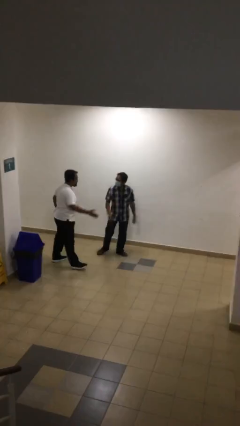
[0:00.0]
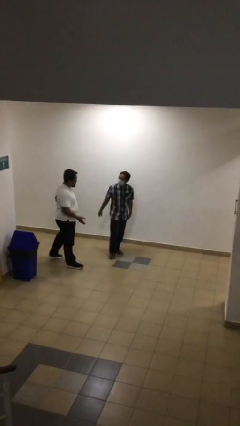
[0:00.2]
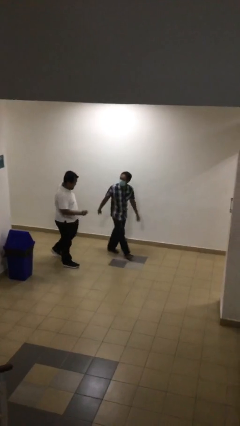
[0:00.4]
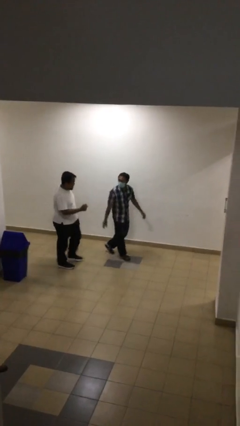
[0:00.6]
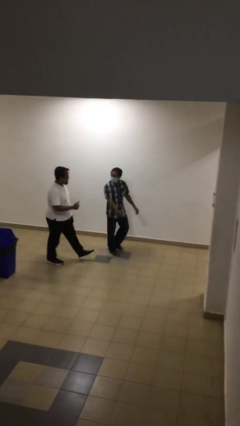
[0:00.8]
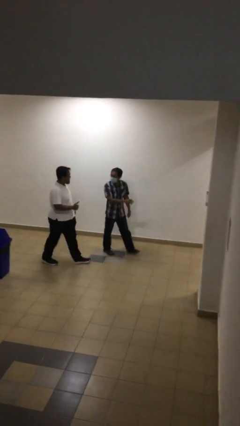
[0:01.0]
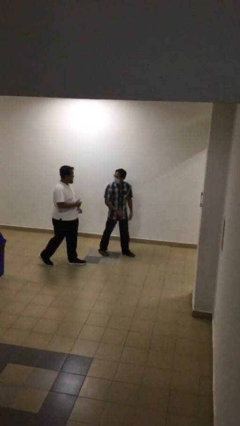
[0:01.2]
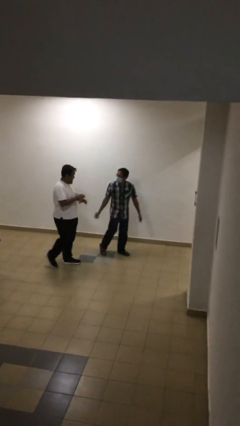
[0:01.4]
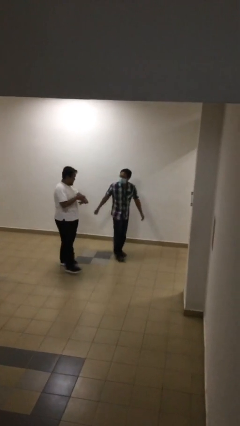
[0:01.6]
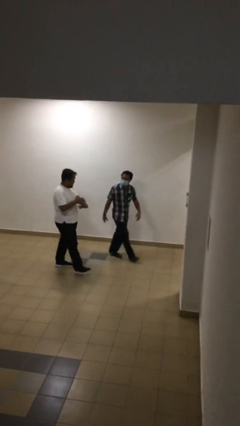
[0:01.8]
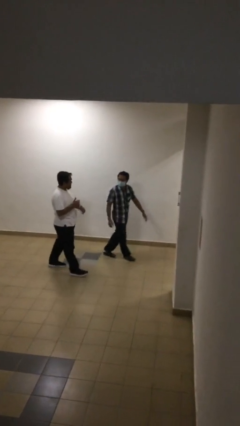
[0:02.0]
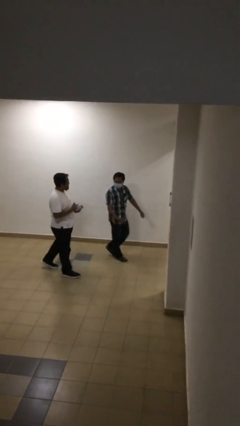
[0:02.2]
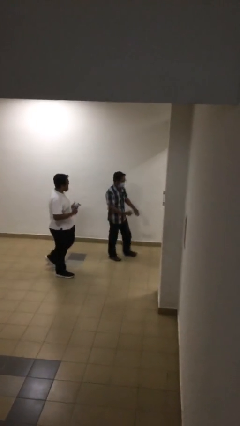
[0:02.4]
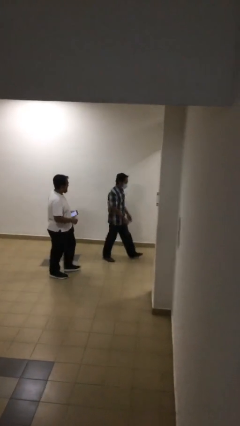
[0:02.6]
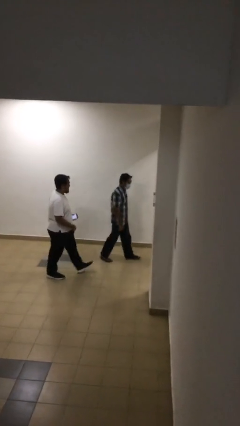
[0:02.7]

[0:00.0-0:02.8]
person talks to person

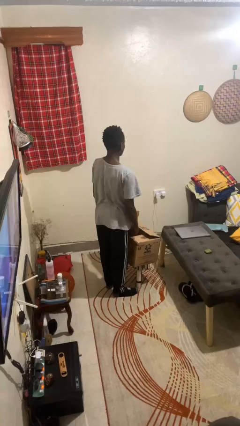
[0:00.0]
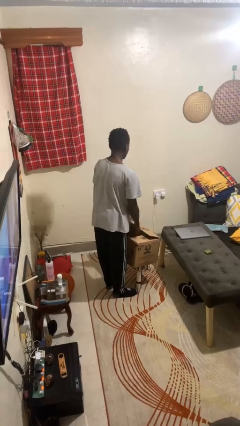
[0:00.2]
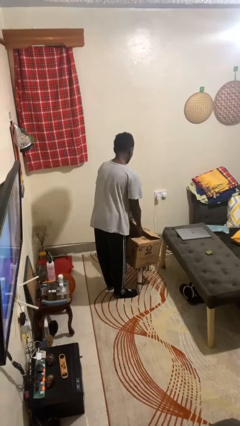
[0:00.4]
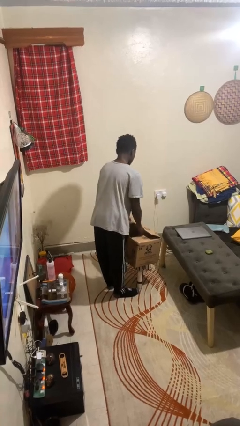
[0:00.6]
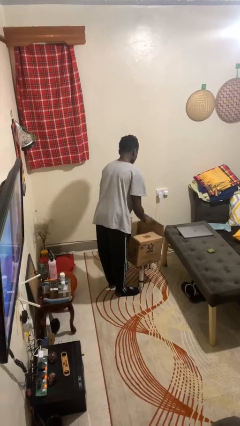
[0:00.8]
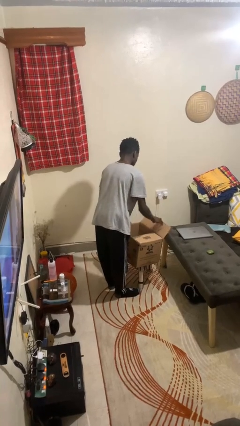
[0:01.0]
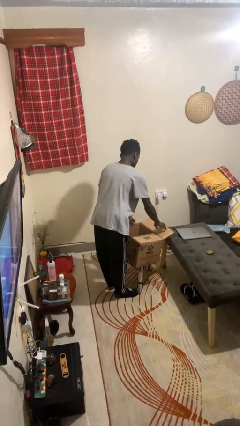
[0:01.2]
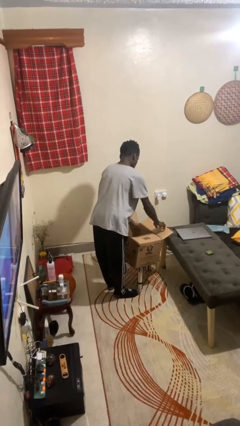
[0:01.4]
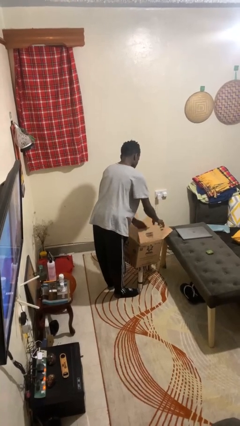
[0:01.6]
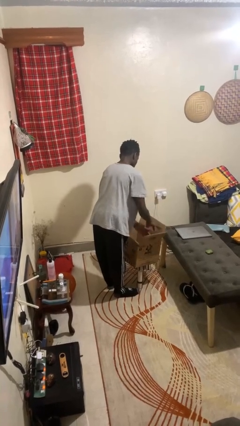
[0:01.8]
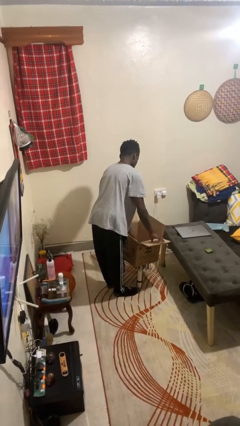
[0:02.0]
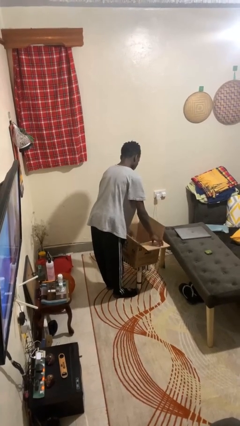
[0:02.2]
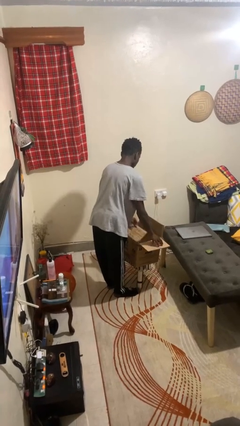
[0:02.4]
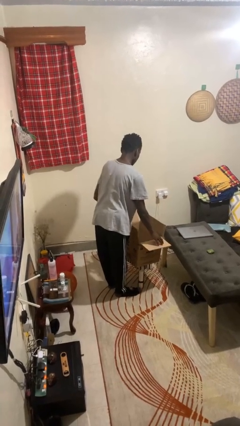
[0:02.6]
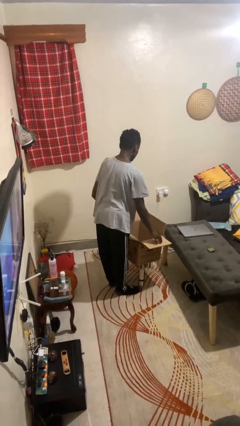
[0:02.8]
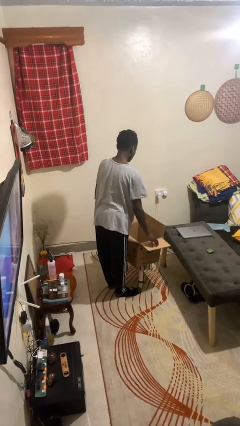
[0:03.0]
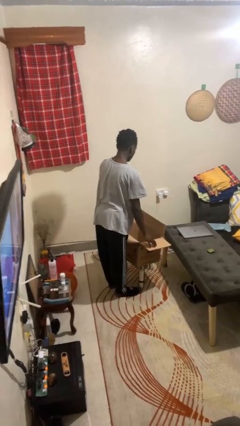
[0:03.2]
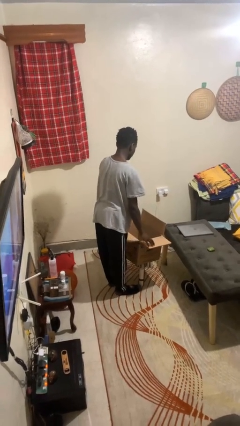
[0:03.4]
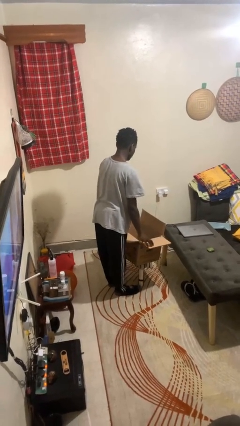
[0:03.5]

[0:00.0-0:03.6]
person opens box

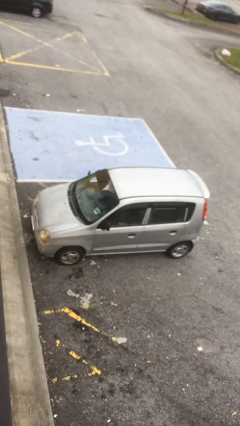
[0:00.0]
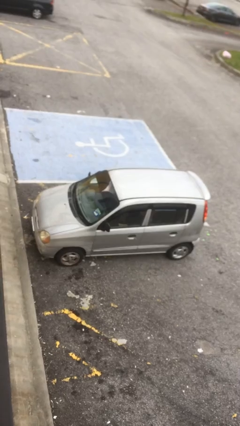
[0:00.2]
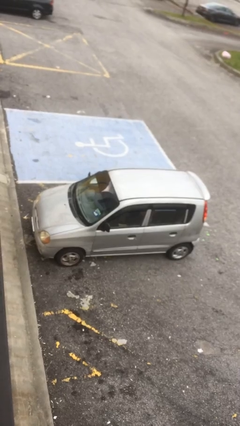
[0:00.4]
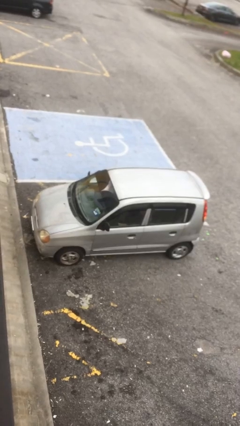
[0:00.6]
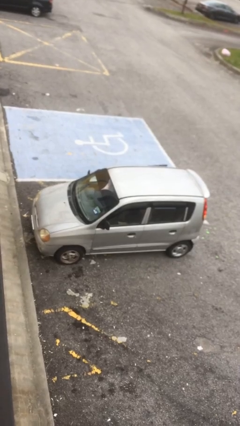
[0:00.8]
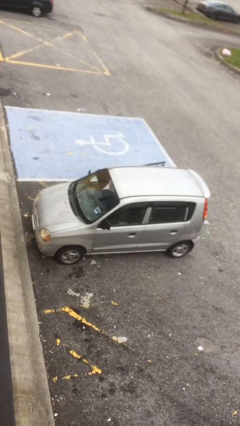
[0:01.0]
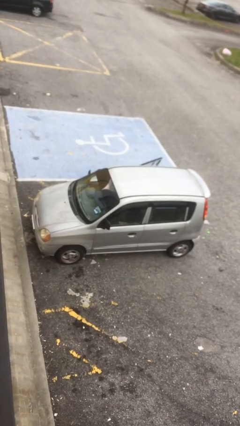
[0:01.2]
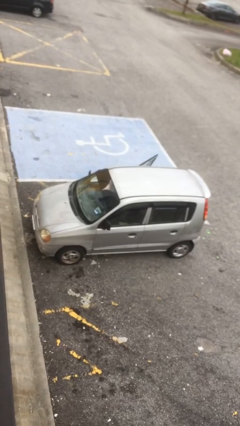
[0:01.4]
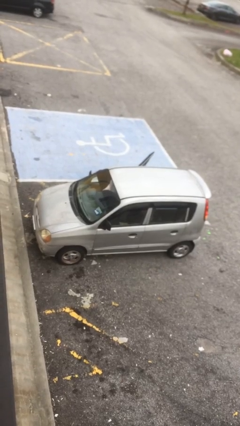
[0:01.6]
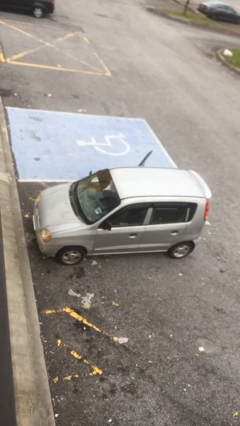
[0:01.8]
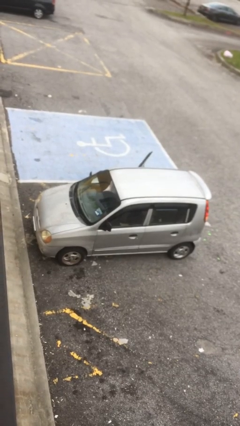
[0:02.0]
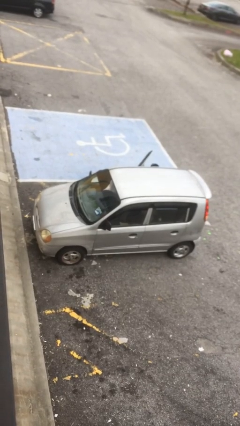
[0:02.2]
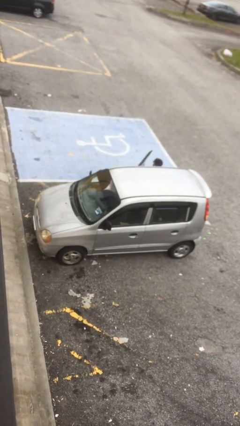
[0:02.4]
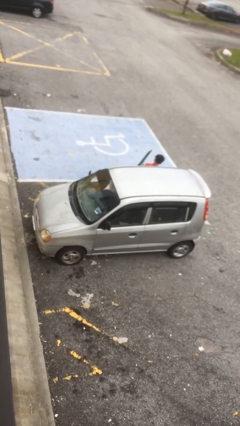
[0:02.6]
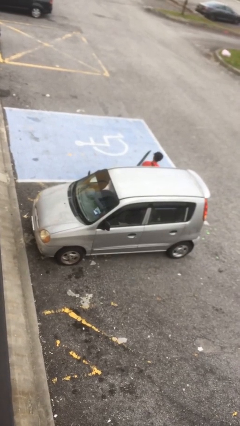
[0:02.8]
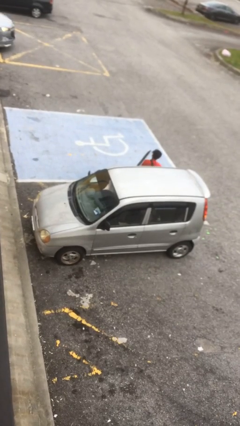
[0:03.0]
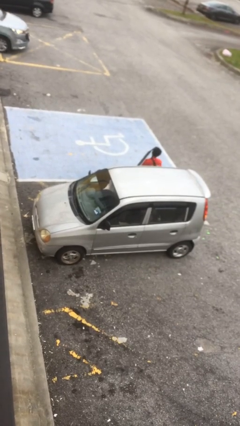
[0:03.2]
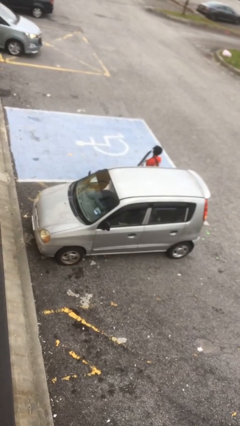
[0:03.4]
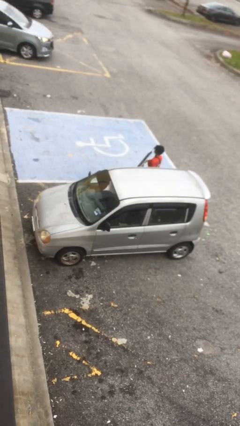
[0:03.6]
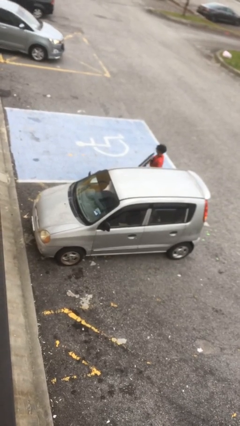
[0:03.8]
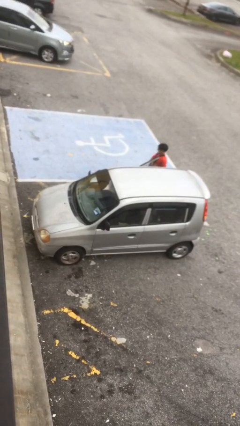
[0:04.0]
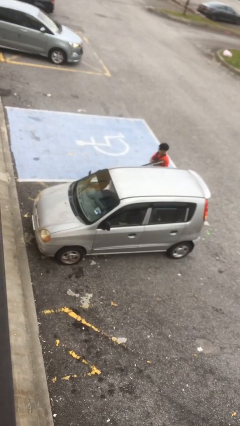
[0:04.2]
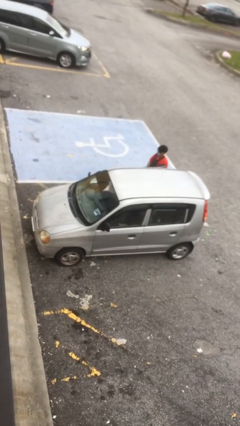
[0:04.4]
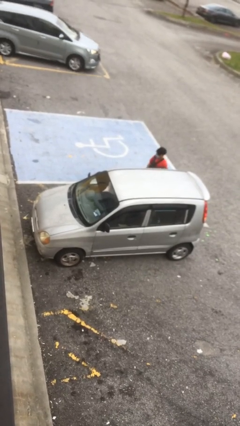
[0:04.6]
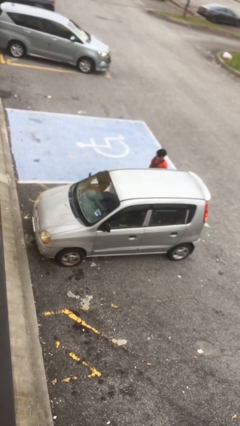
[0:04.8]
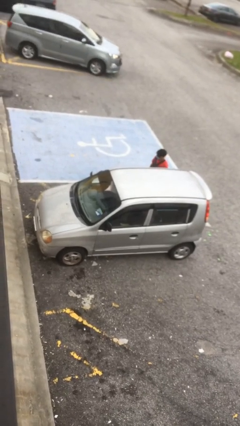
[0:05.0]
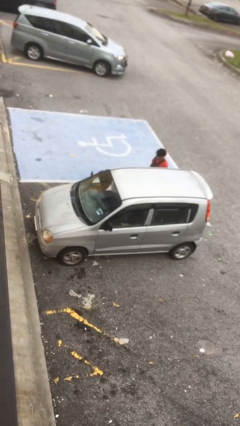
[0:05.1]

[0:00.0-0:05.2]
car drops off person

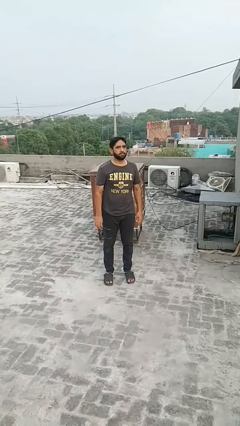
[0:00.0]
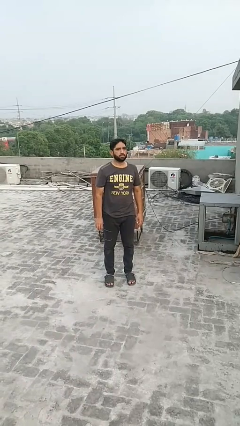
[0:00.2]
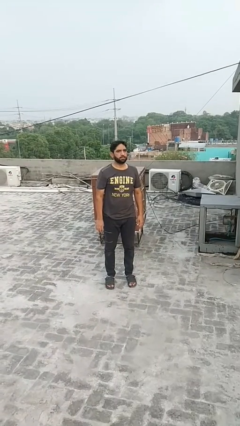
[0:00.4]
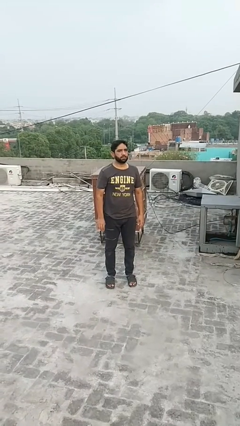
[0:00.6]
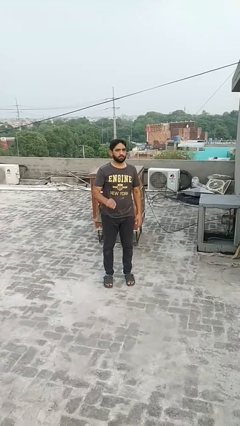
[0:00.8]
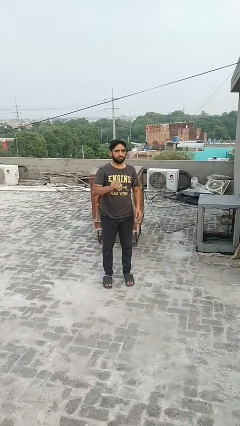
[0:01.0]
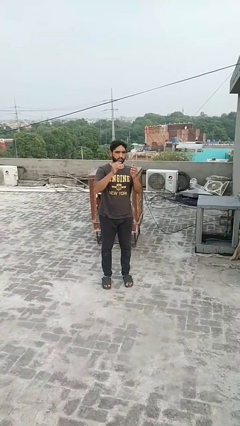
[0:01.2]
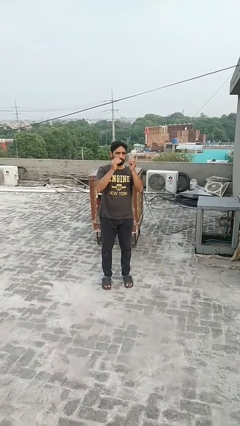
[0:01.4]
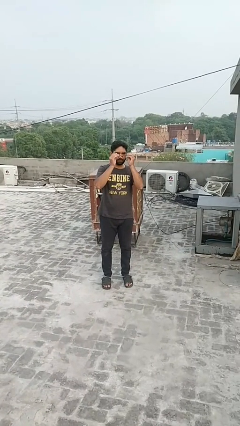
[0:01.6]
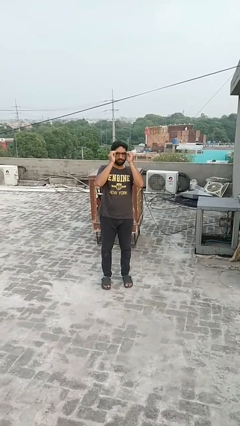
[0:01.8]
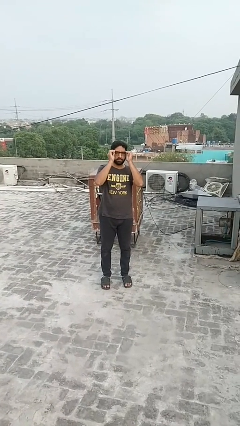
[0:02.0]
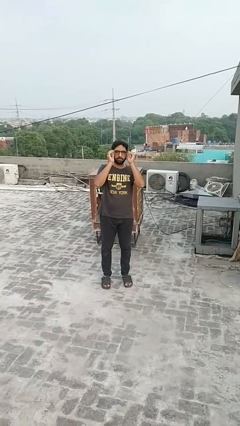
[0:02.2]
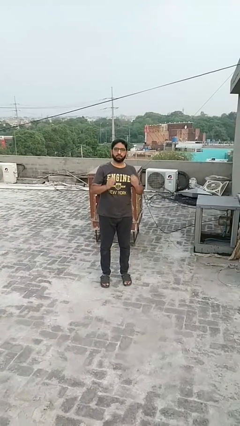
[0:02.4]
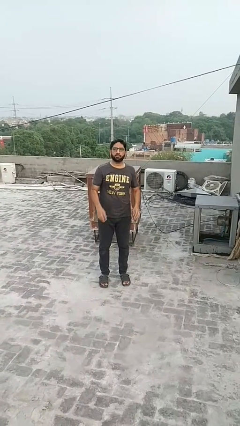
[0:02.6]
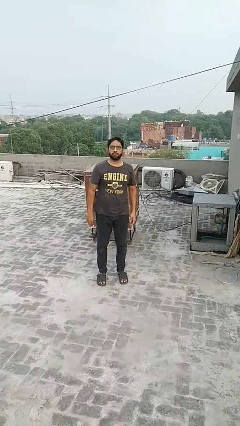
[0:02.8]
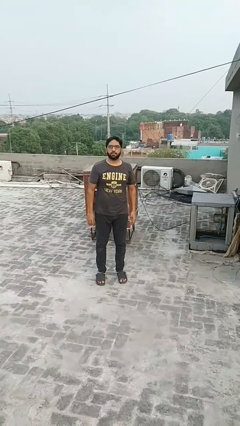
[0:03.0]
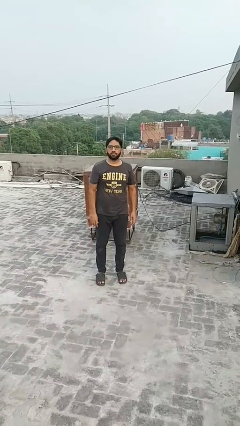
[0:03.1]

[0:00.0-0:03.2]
person puts on glasses

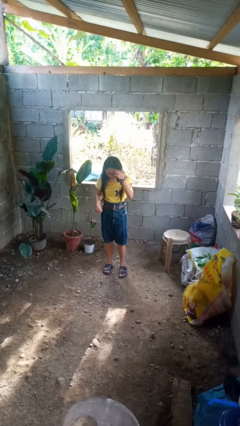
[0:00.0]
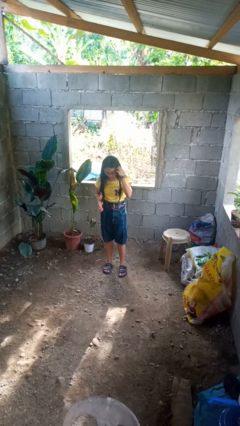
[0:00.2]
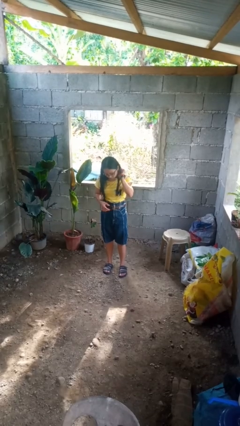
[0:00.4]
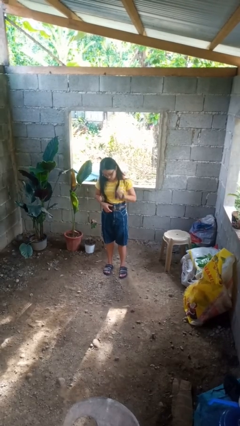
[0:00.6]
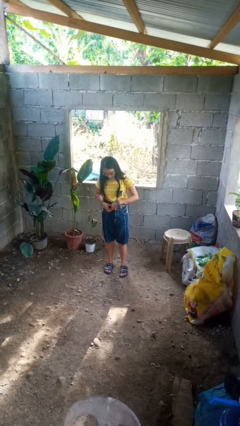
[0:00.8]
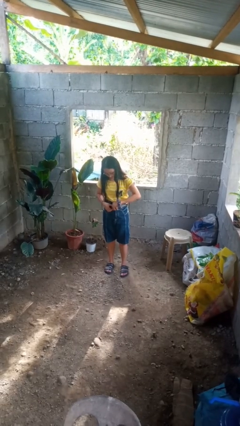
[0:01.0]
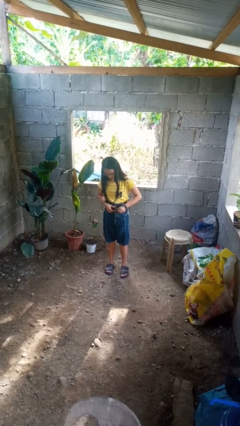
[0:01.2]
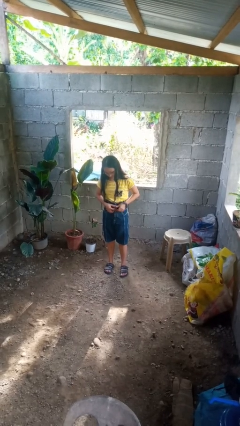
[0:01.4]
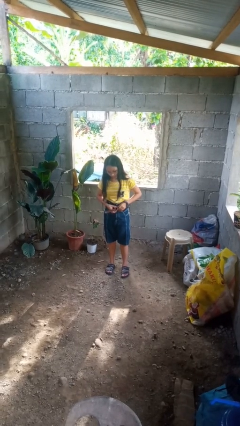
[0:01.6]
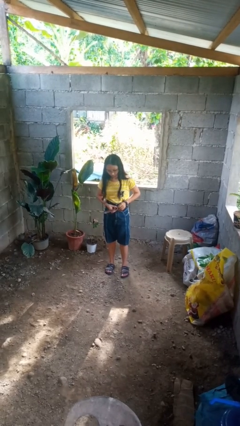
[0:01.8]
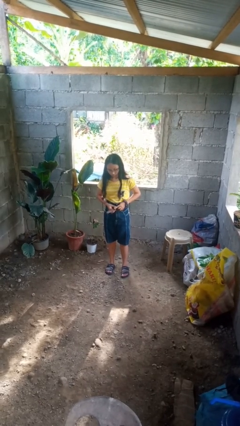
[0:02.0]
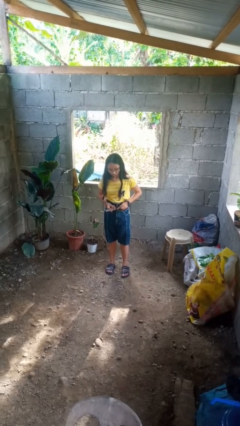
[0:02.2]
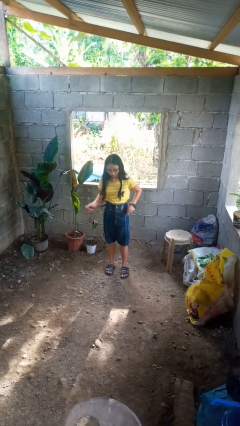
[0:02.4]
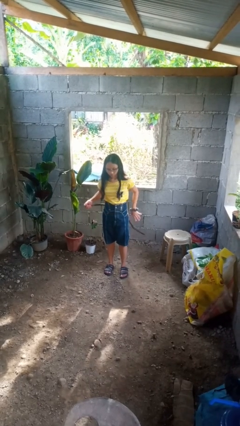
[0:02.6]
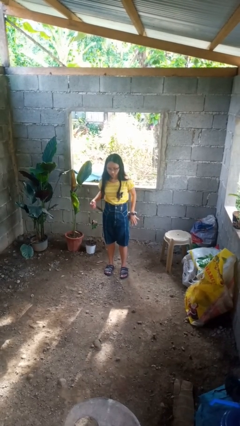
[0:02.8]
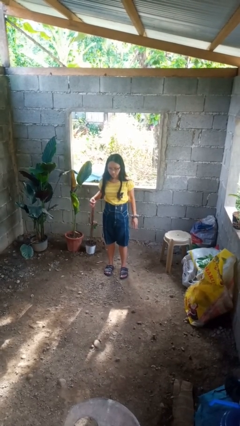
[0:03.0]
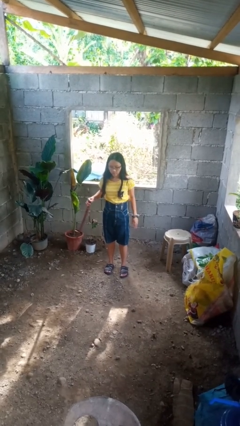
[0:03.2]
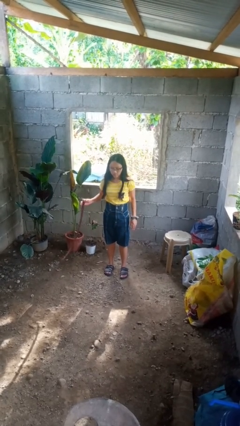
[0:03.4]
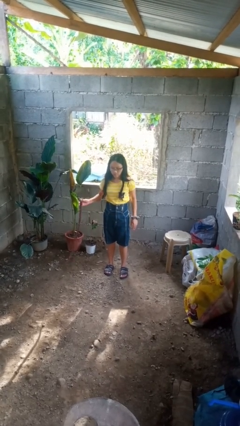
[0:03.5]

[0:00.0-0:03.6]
person takes off belt
